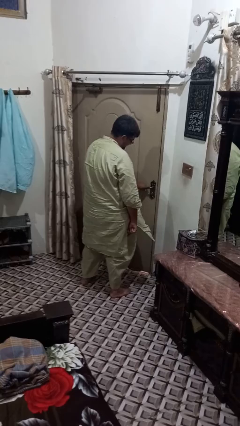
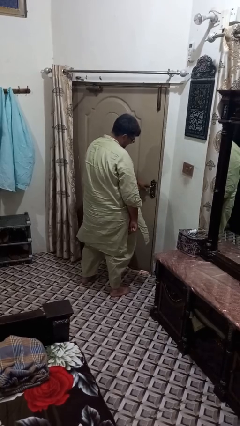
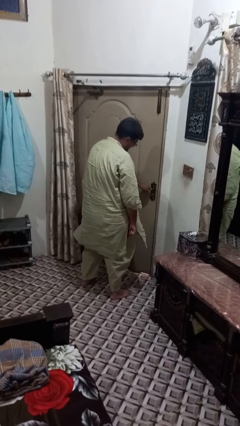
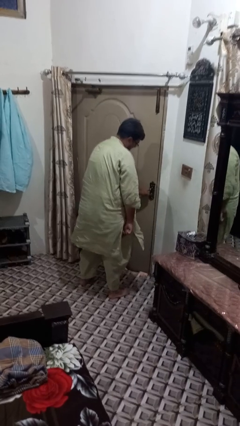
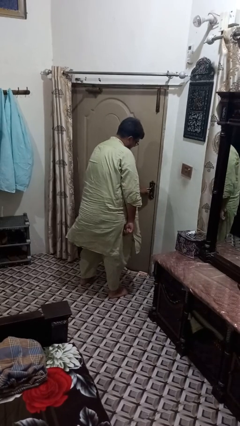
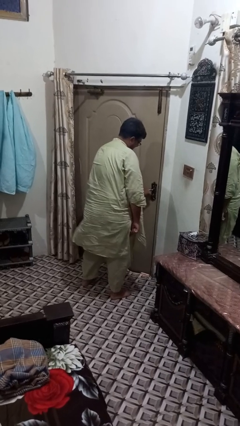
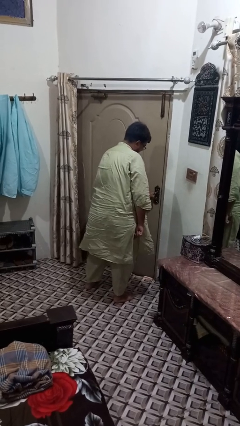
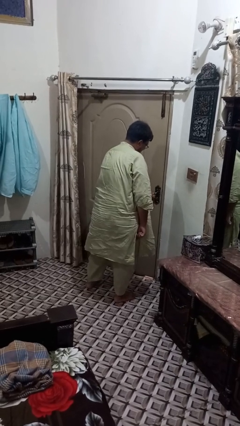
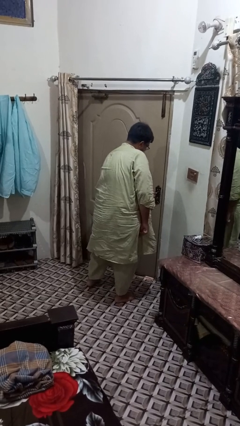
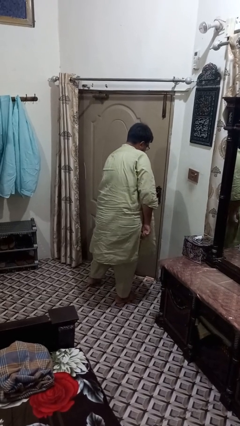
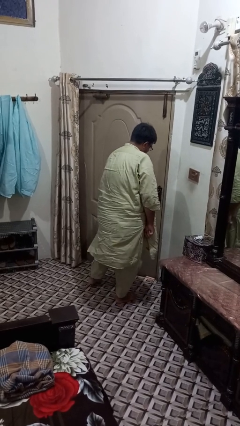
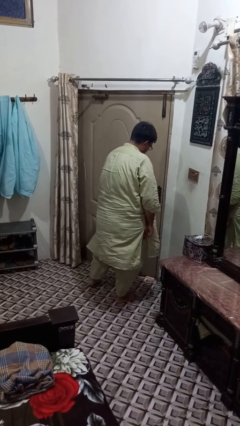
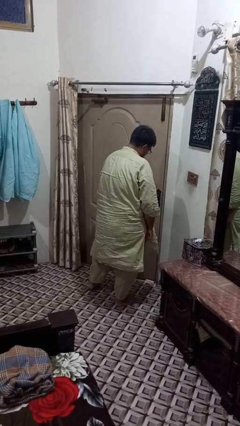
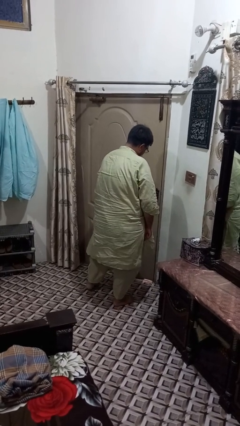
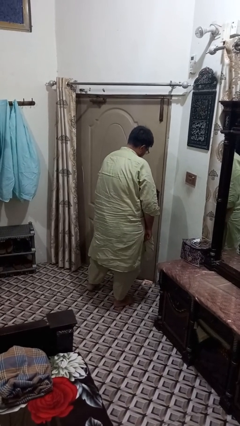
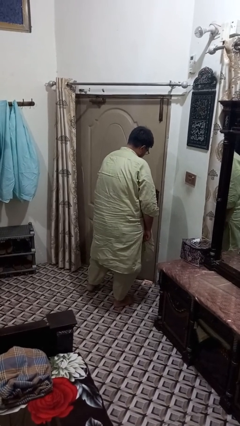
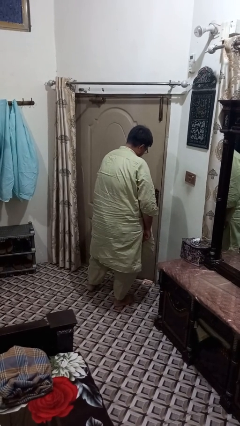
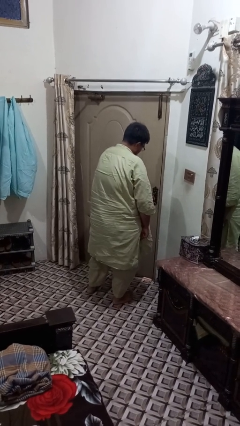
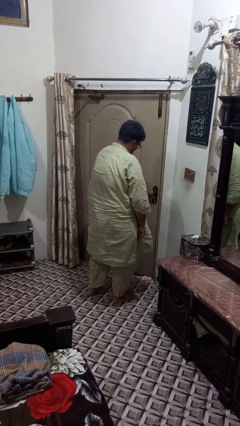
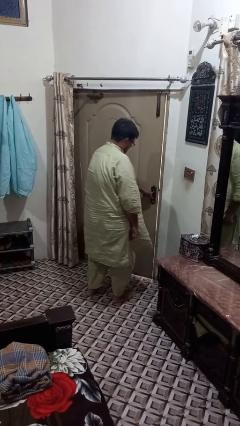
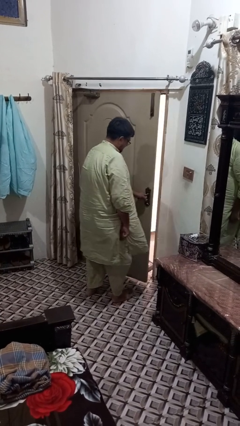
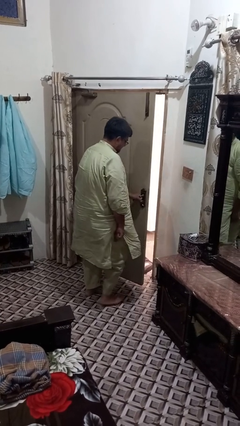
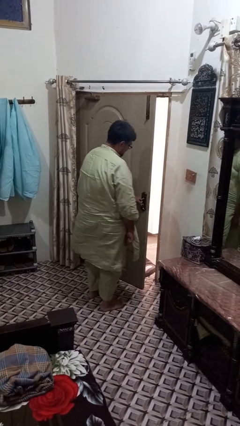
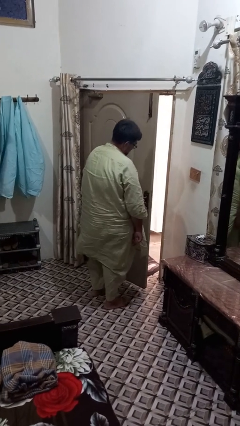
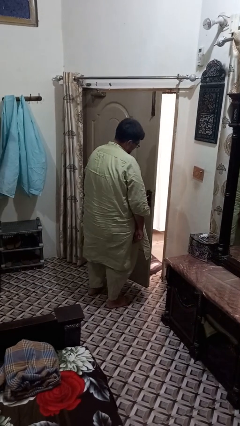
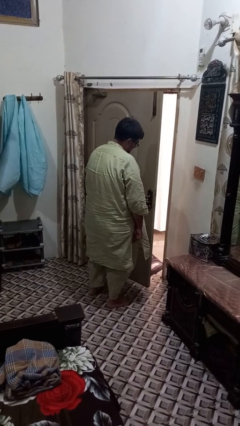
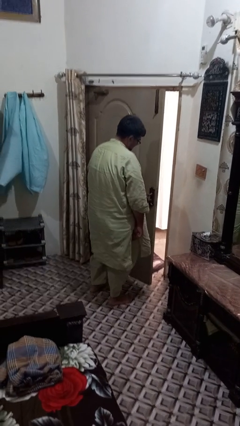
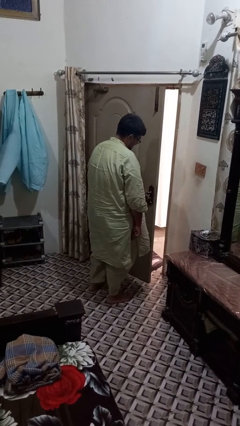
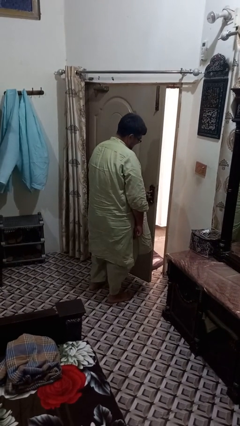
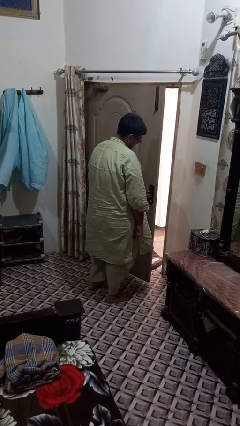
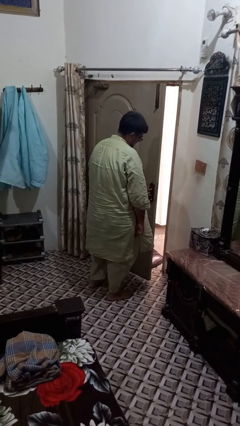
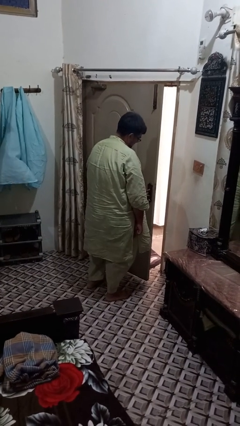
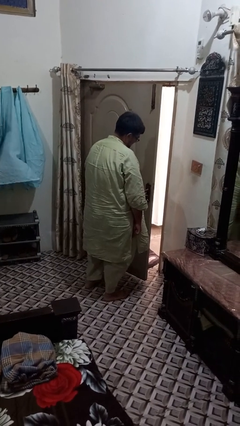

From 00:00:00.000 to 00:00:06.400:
person opens facility door

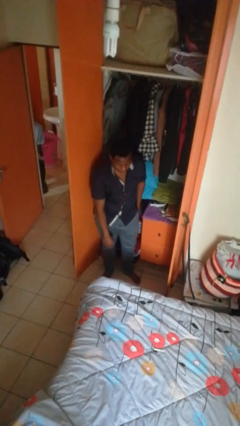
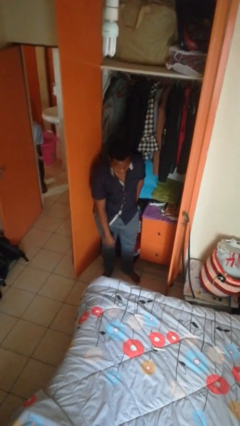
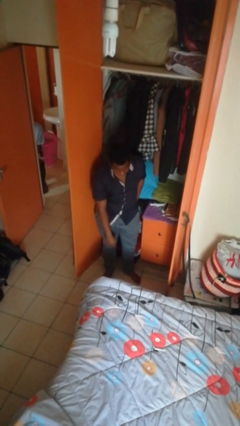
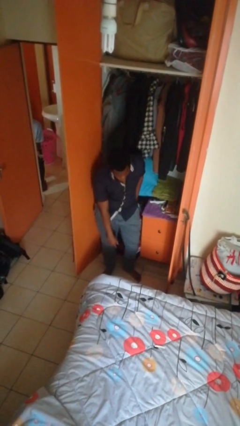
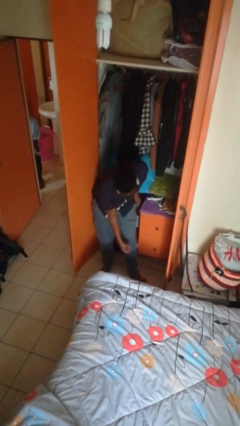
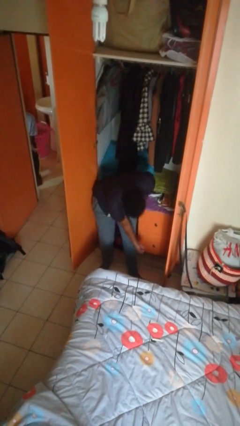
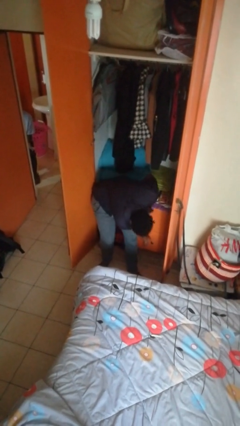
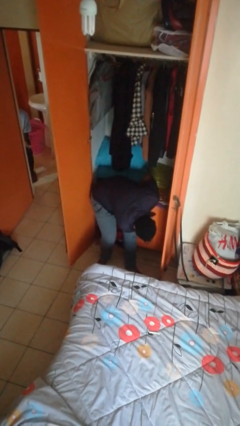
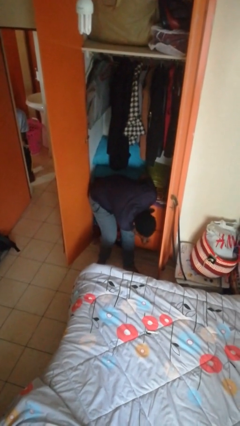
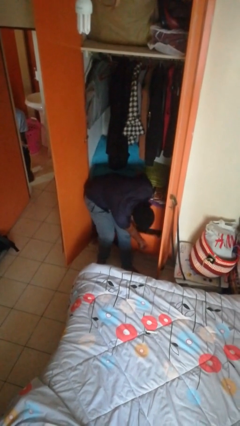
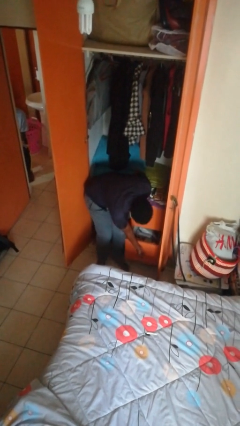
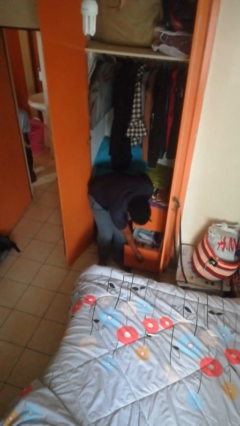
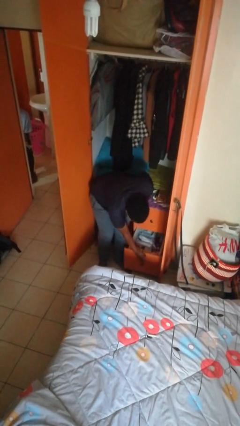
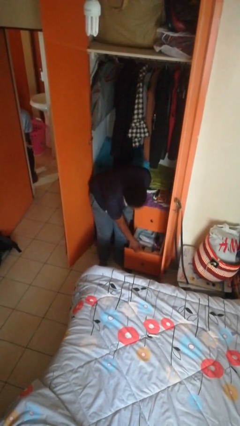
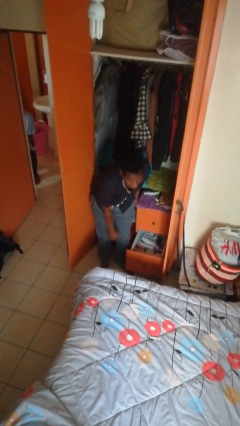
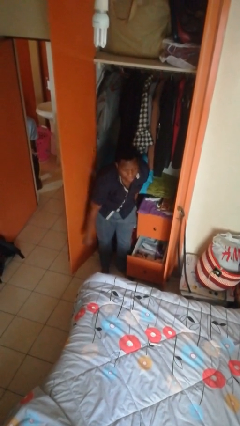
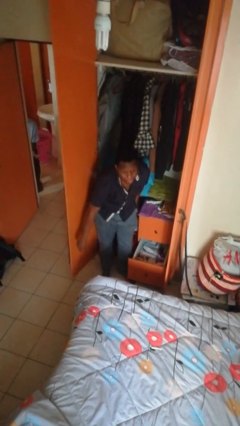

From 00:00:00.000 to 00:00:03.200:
person opens dresser drawer

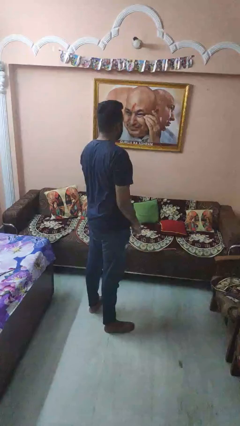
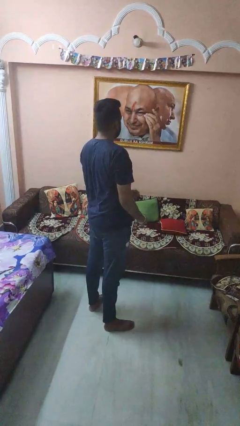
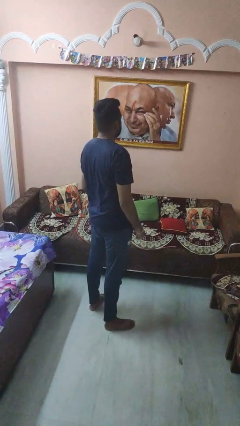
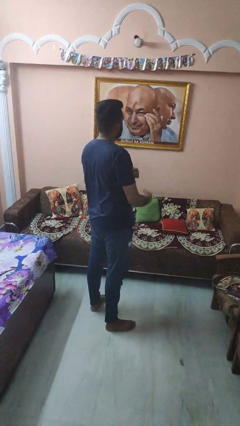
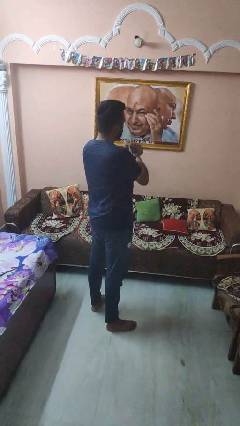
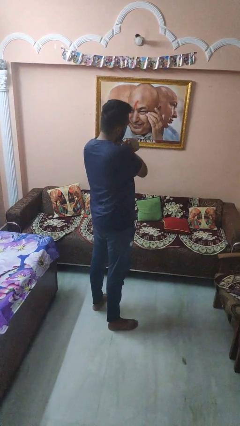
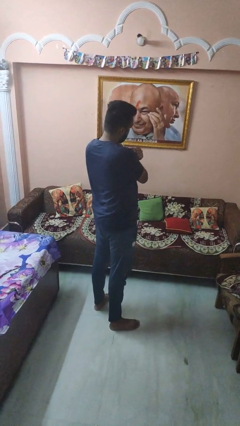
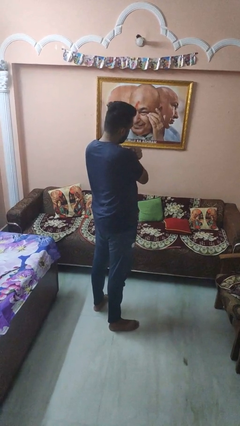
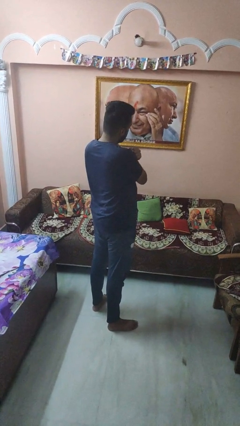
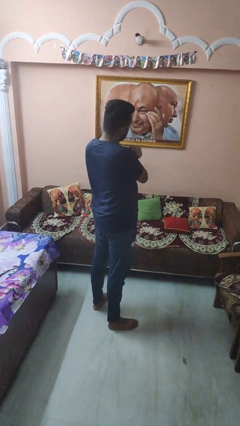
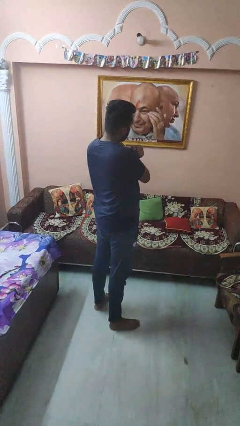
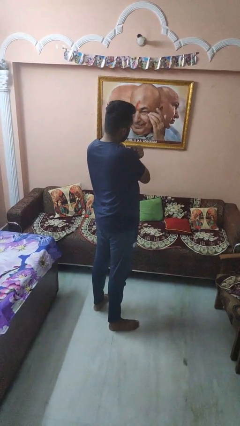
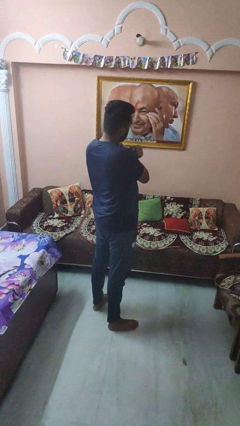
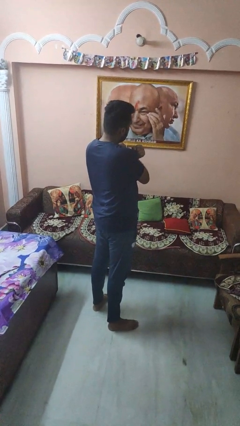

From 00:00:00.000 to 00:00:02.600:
person gestures arms x

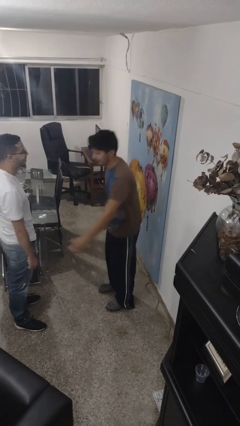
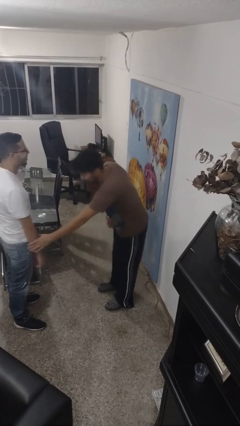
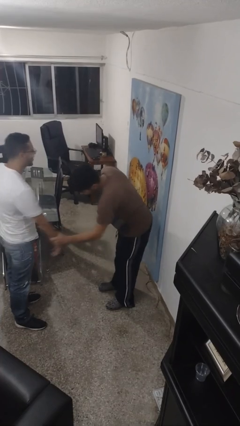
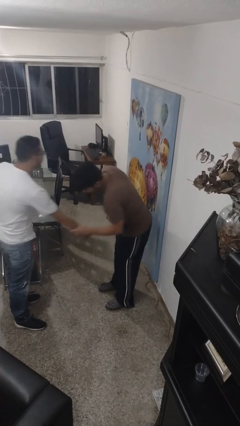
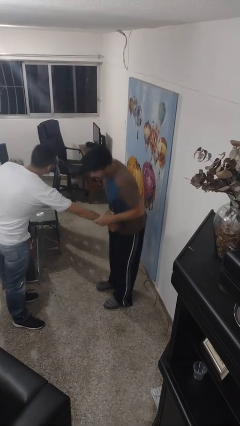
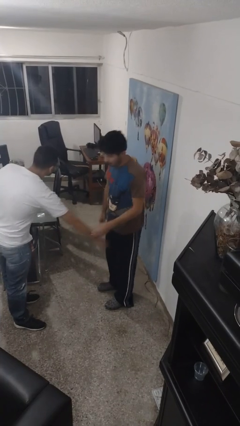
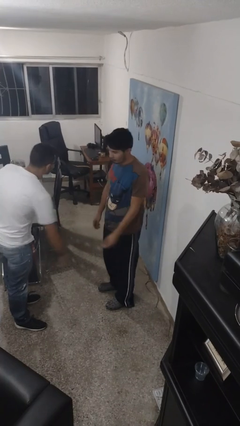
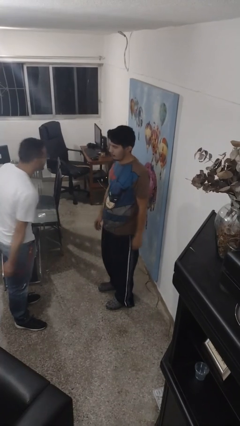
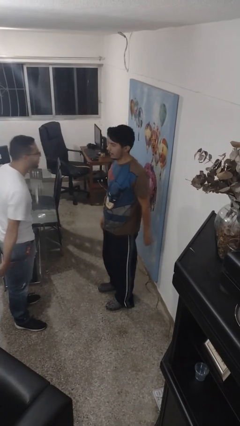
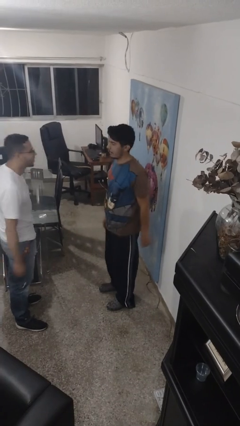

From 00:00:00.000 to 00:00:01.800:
person grabs person by forearm

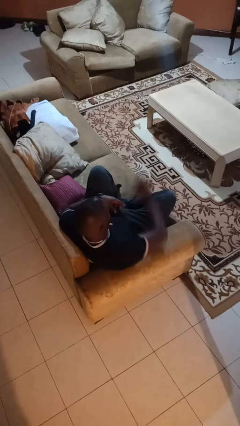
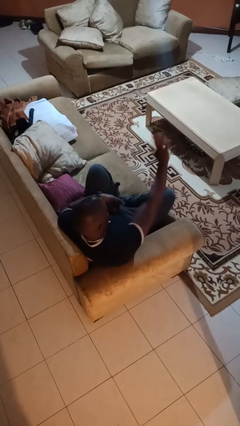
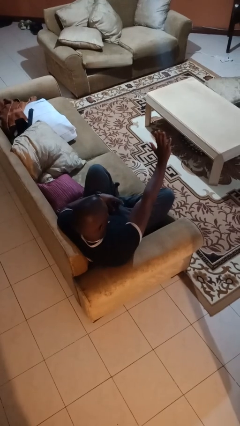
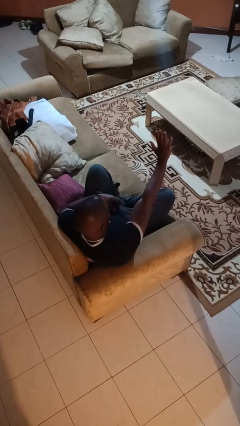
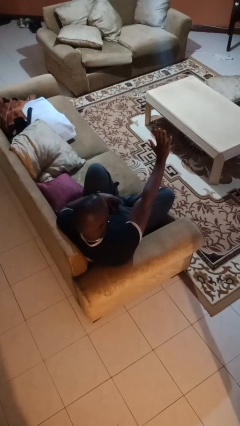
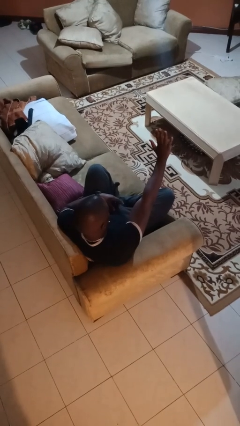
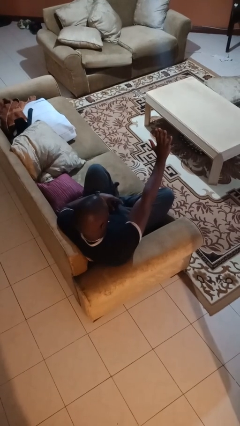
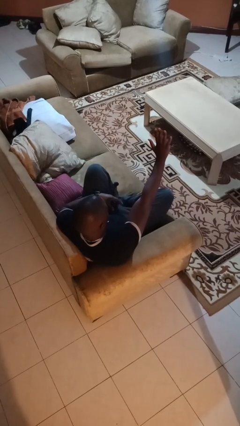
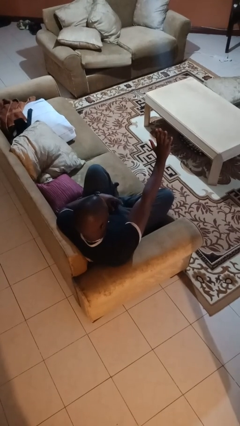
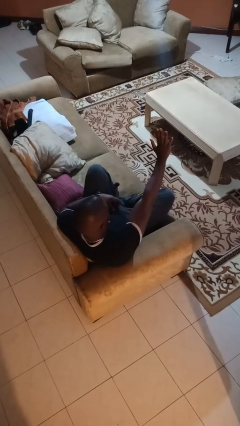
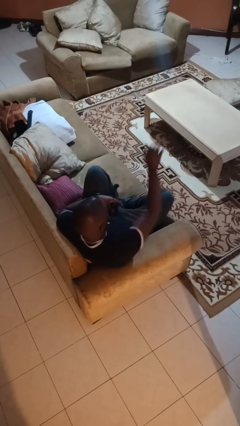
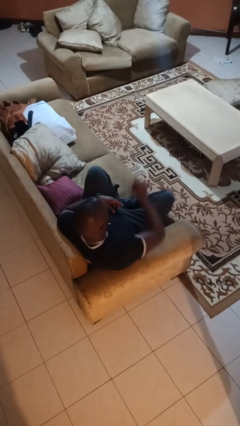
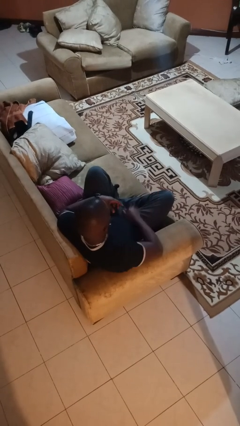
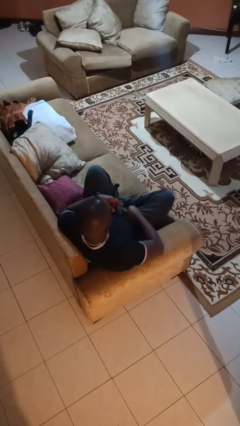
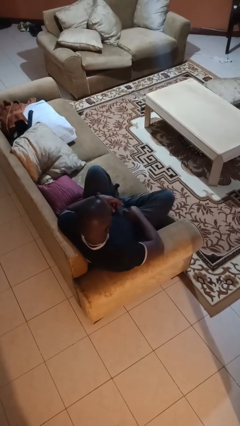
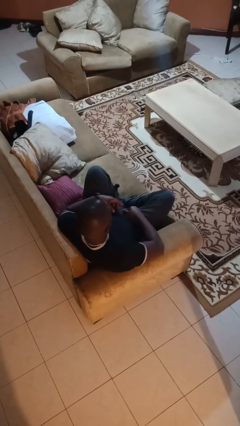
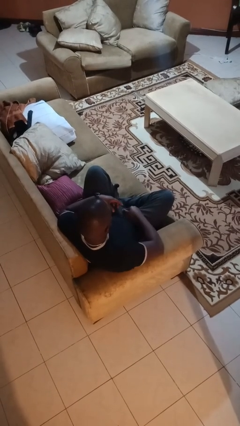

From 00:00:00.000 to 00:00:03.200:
person gestures stop

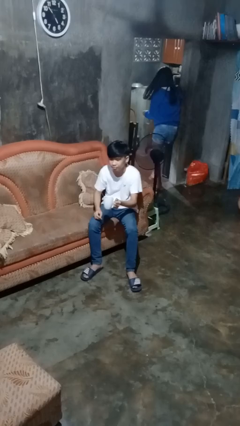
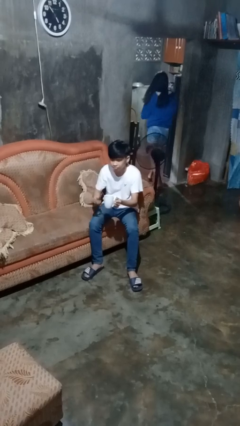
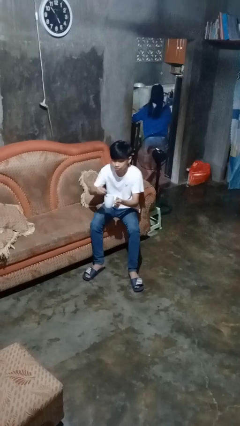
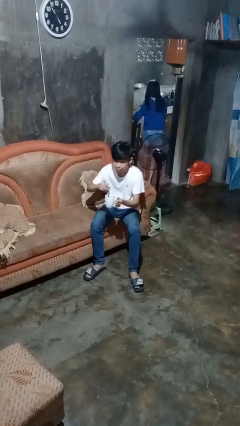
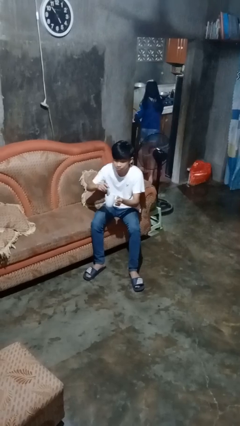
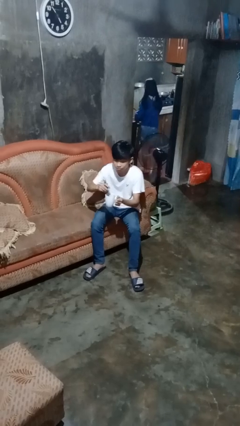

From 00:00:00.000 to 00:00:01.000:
person stirs mug
